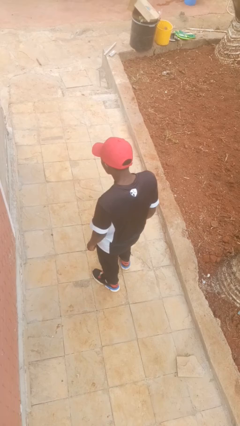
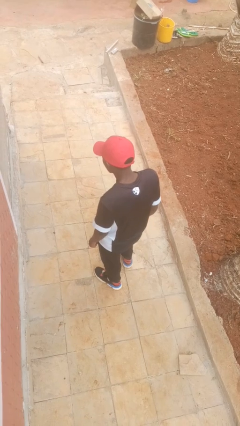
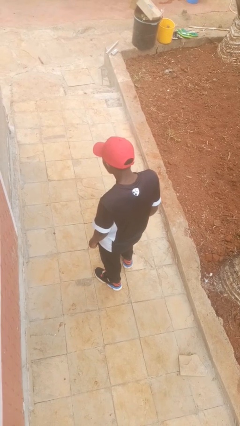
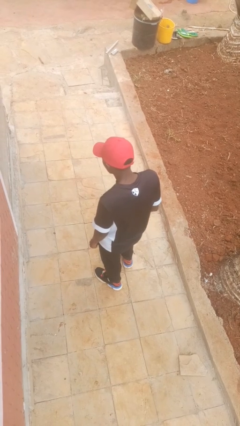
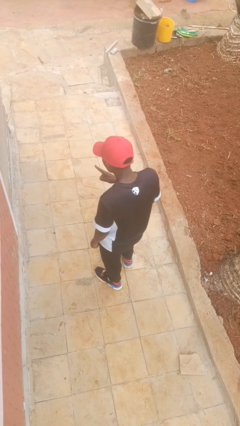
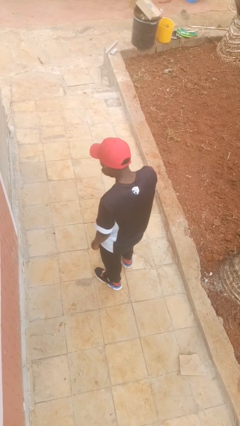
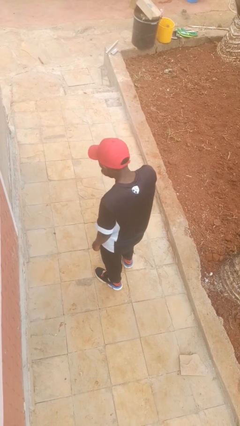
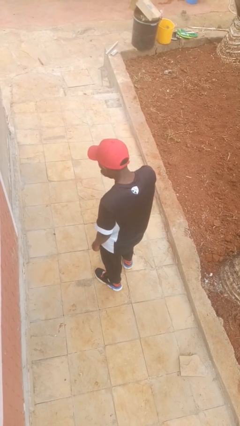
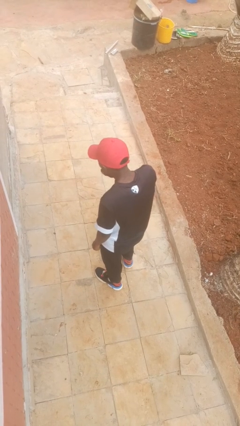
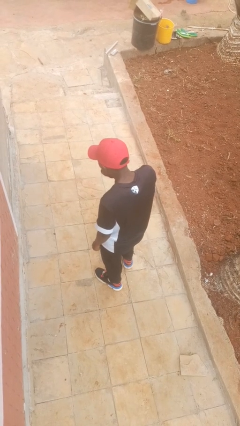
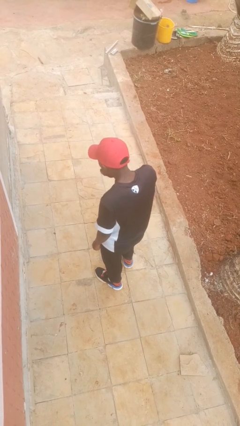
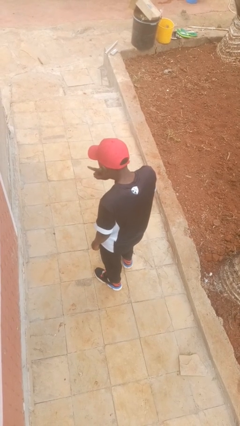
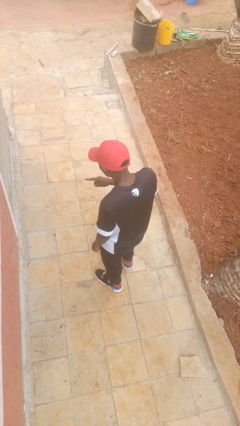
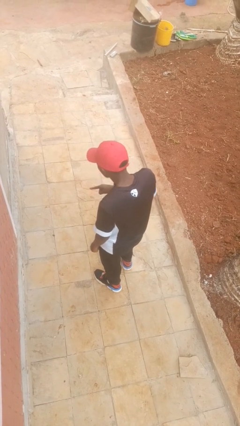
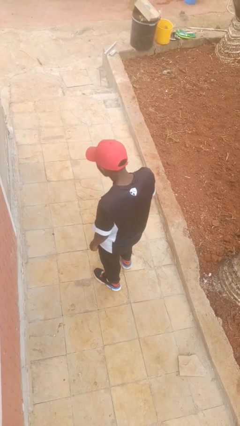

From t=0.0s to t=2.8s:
person gestures be quiet

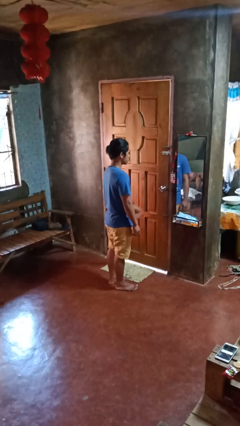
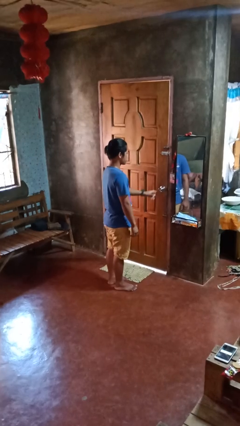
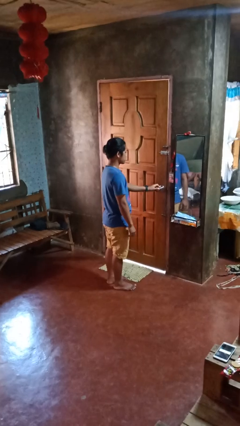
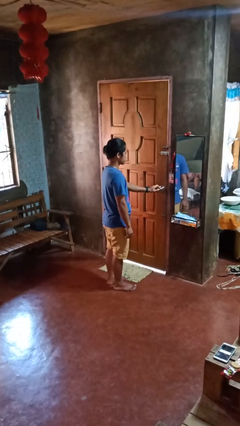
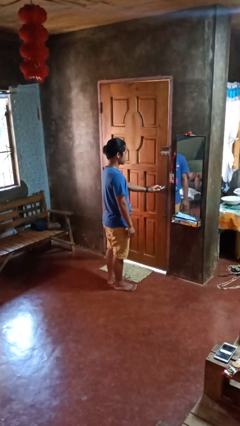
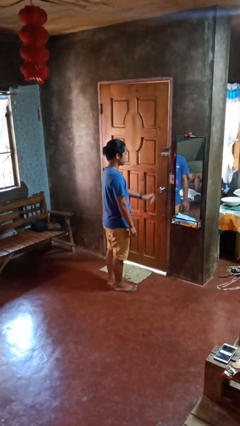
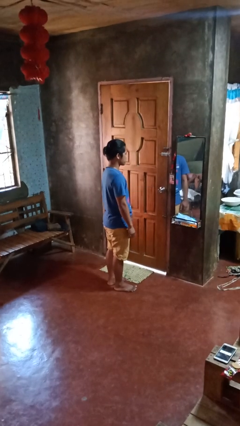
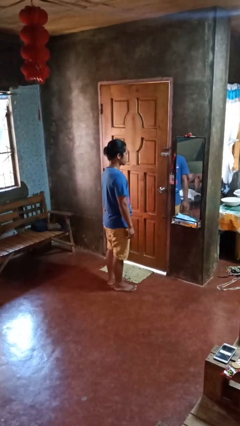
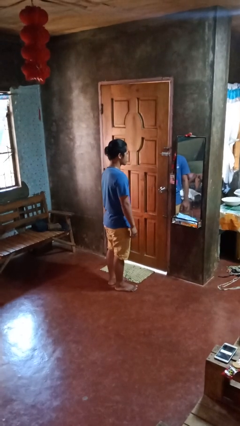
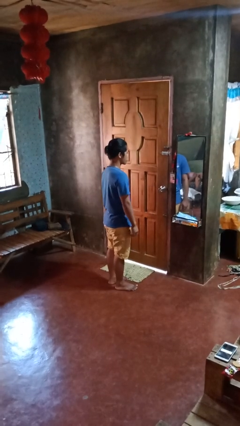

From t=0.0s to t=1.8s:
person locks door with keys

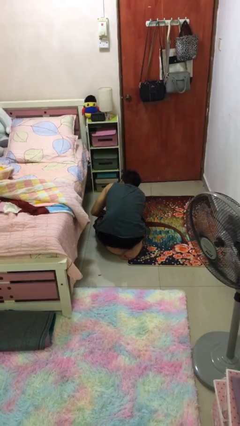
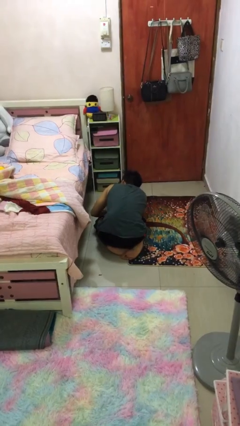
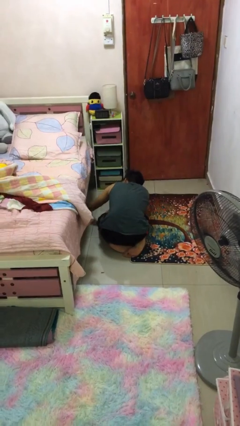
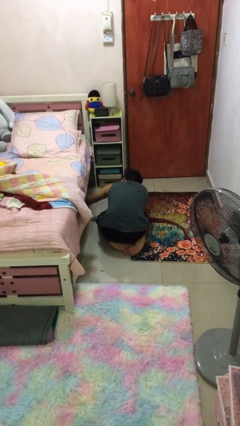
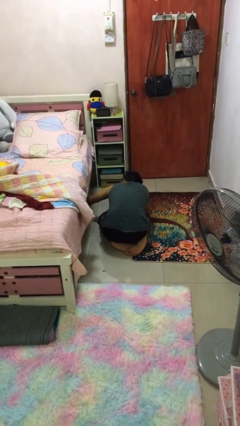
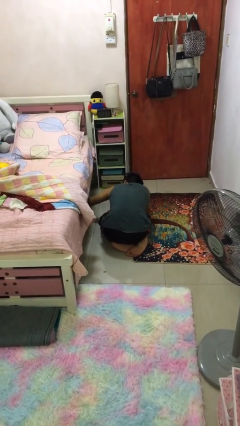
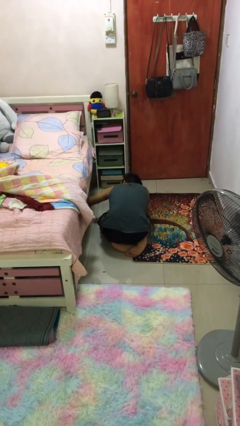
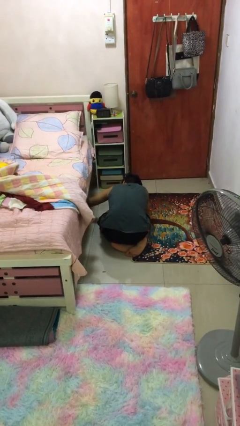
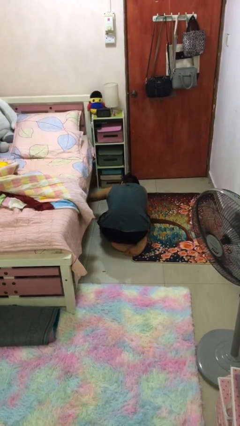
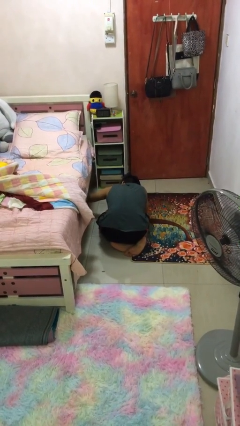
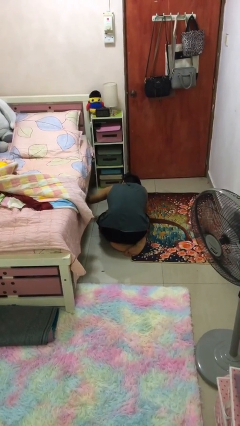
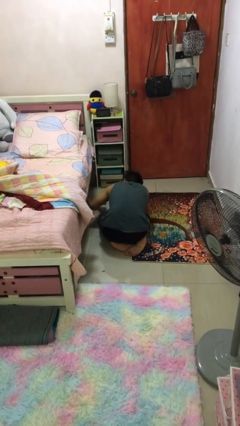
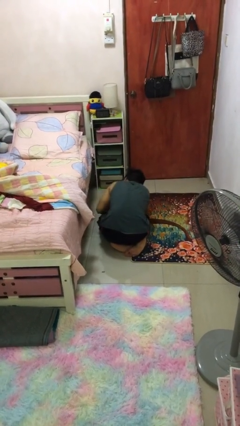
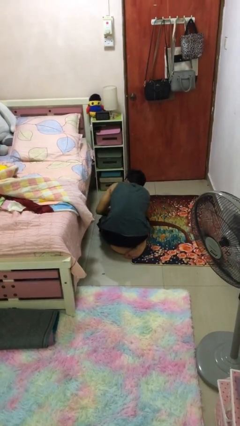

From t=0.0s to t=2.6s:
person searches under bed

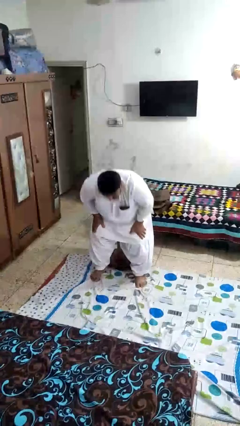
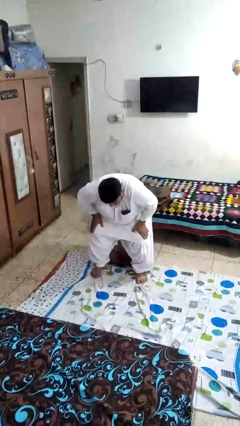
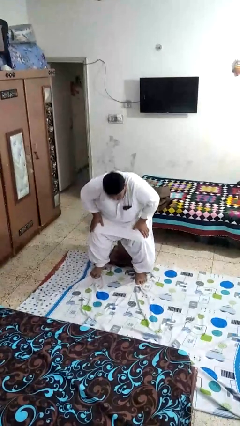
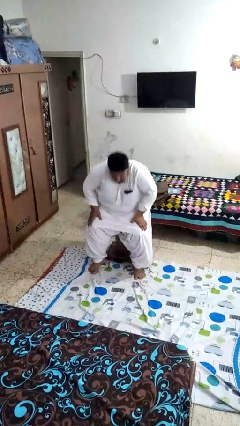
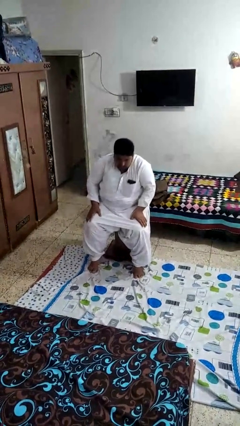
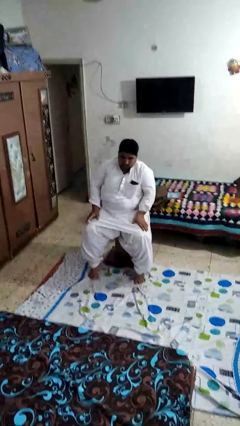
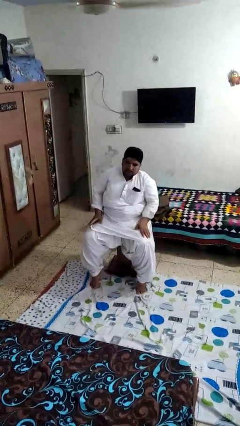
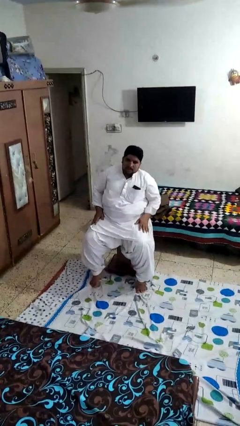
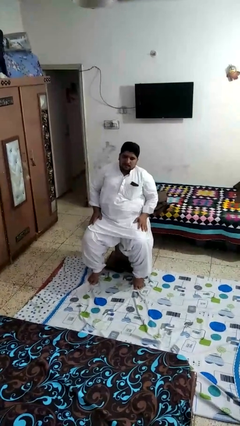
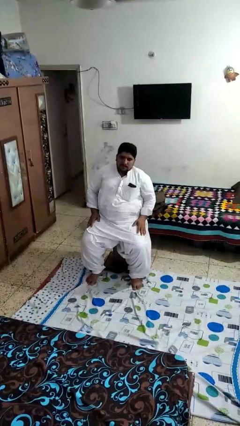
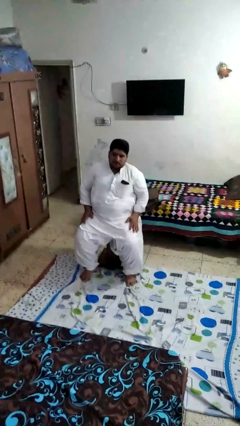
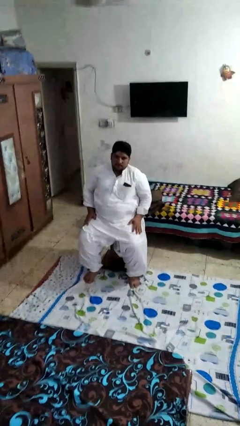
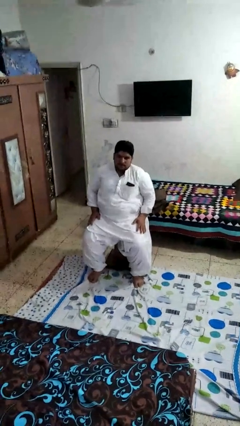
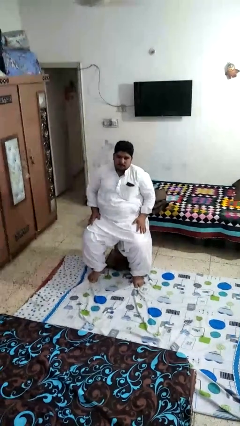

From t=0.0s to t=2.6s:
person sits down

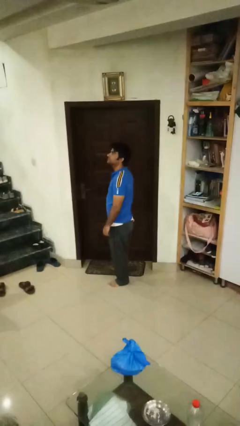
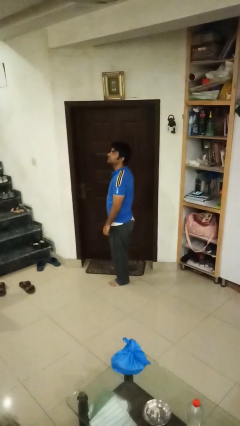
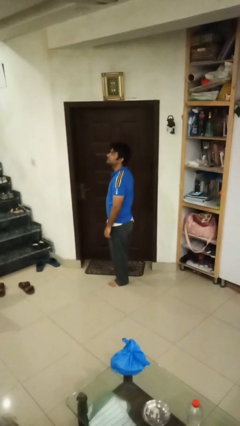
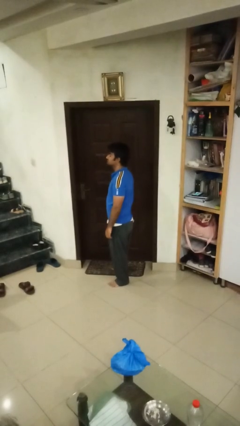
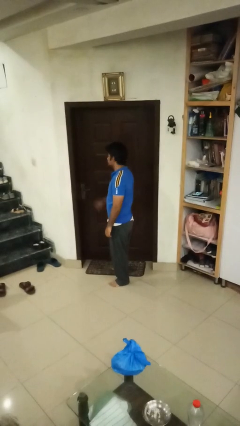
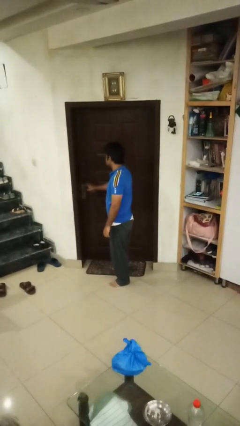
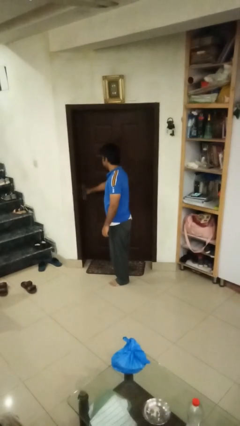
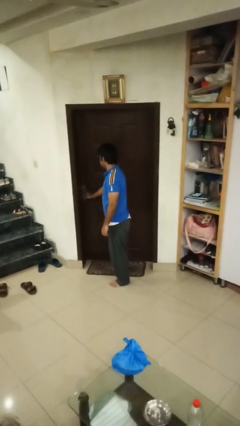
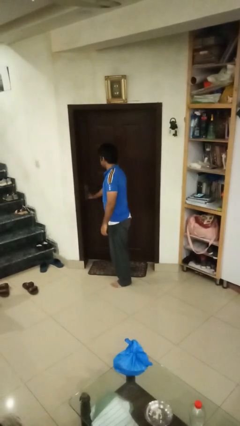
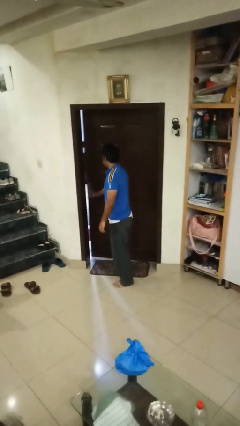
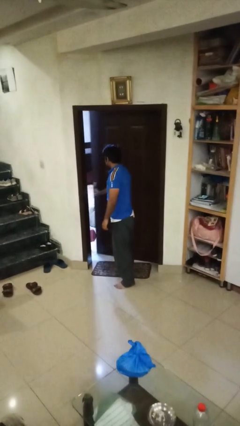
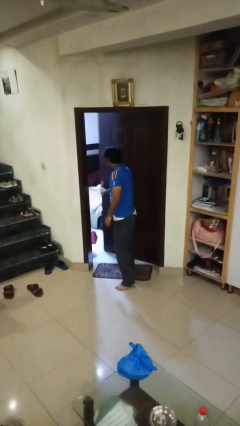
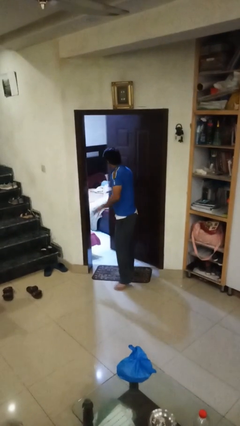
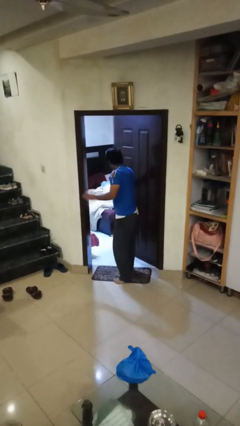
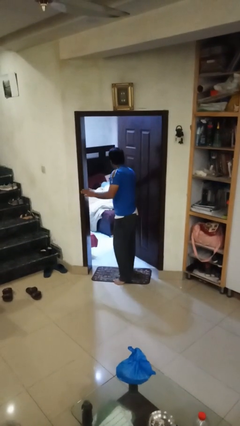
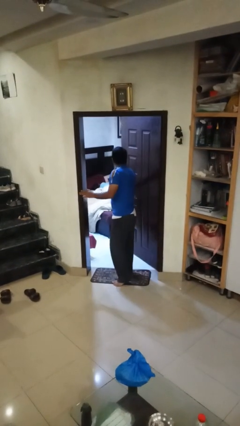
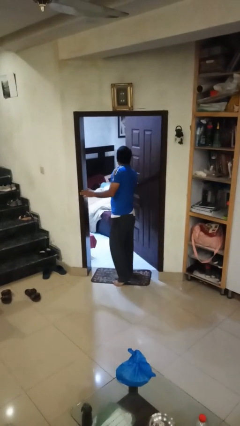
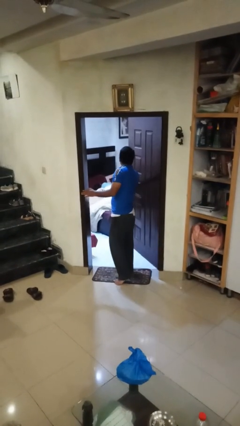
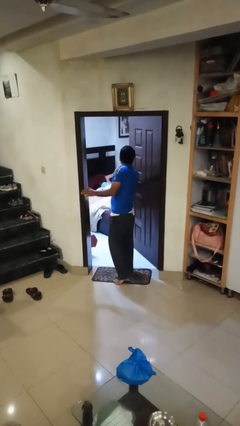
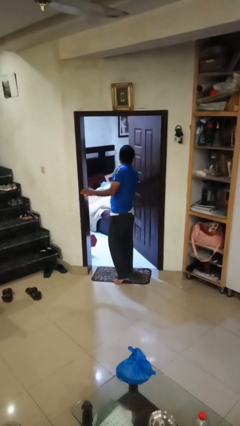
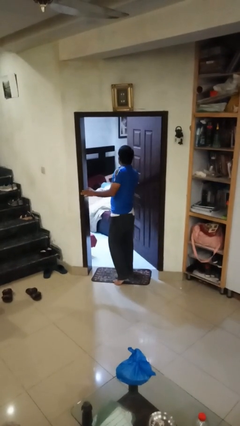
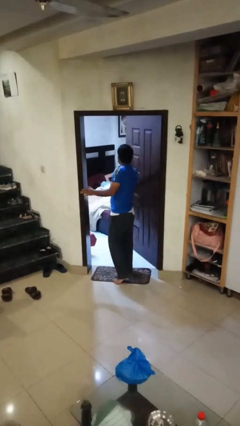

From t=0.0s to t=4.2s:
person opens facility door

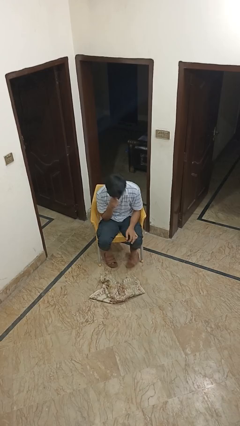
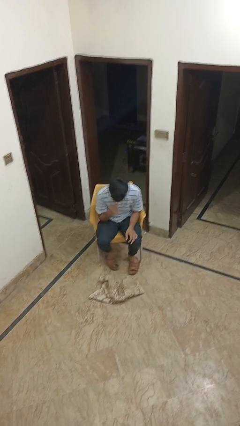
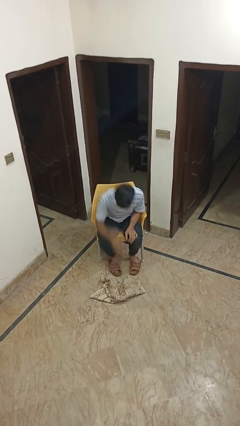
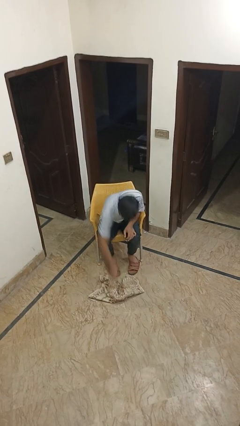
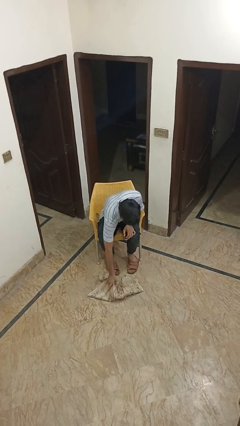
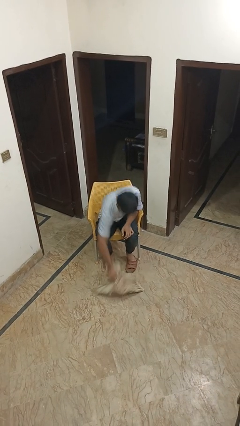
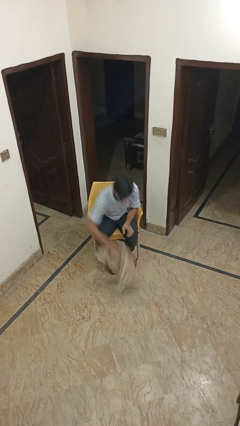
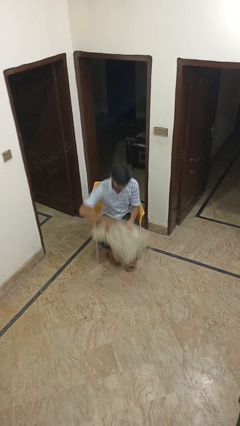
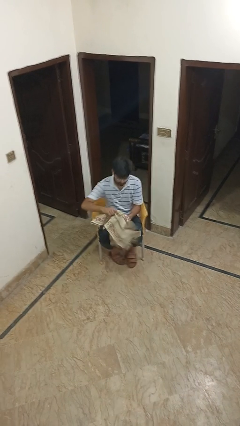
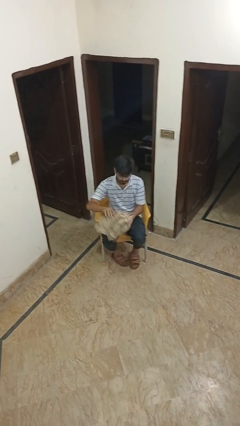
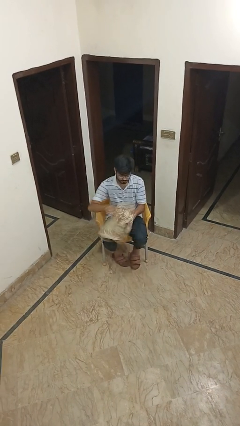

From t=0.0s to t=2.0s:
person picks up object from floor

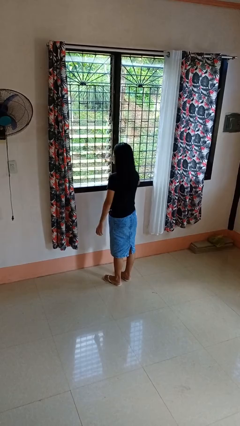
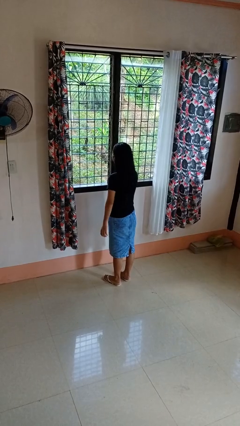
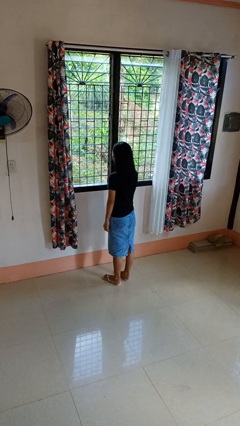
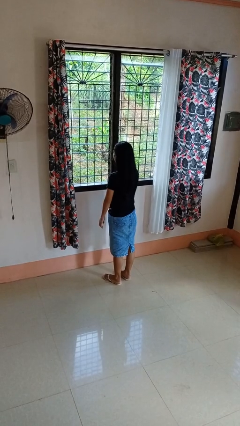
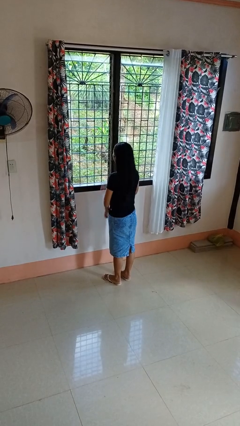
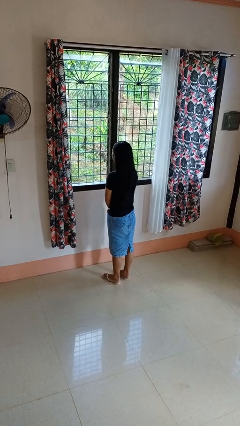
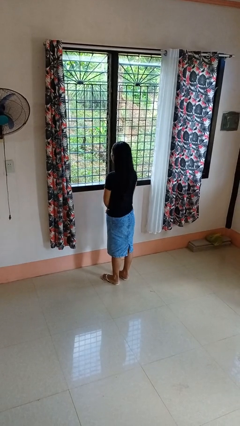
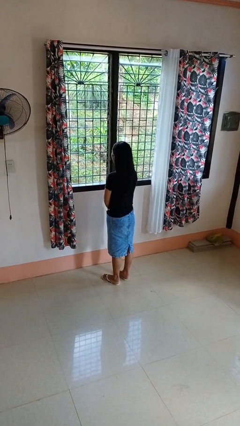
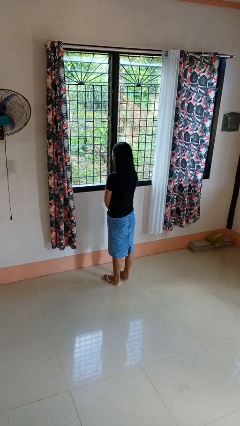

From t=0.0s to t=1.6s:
person closes home window
